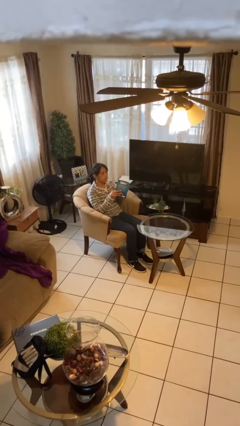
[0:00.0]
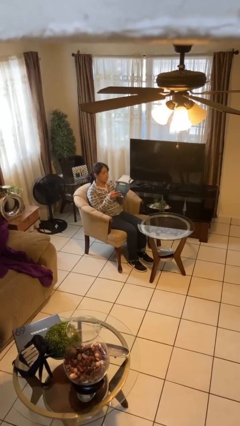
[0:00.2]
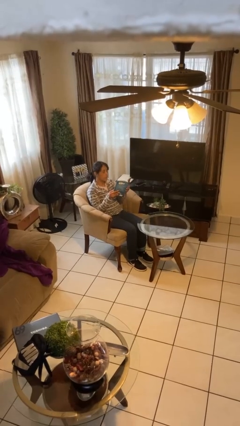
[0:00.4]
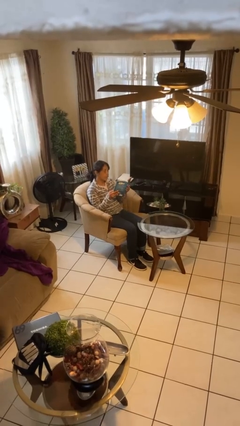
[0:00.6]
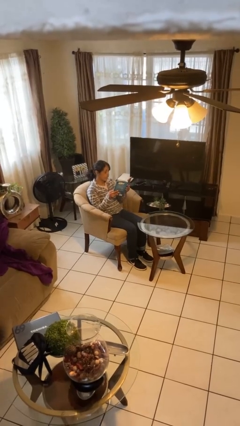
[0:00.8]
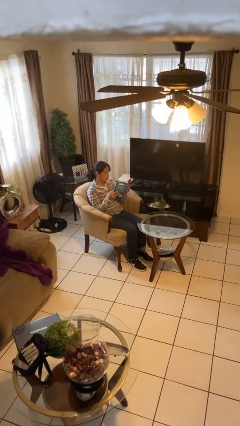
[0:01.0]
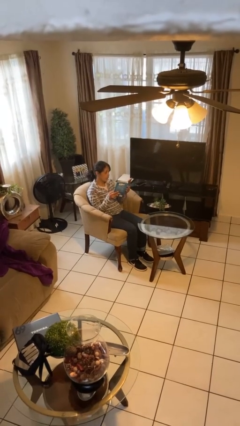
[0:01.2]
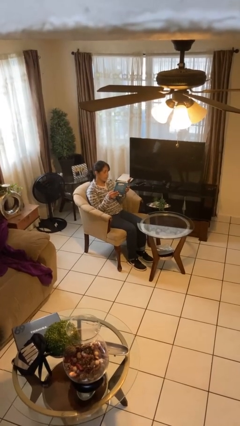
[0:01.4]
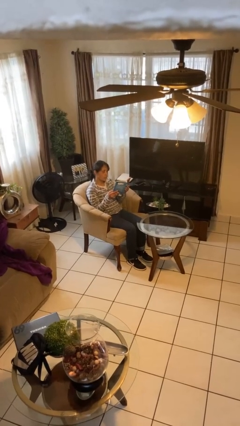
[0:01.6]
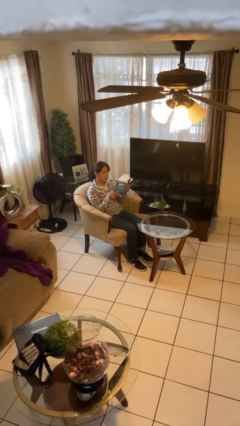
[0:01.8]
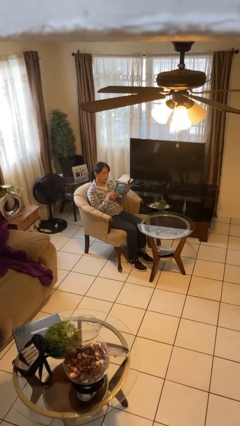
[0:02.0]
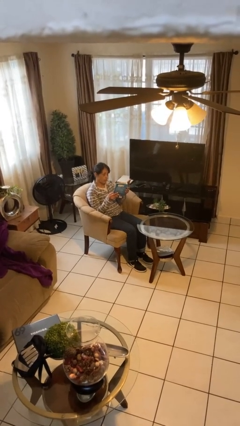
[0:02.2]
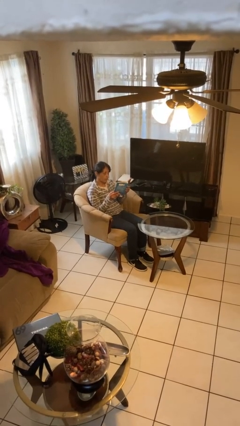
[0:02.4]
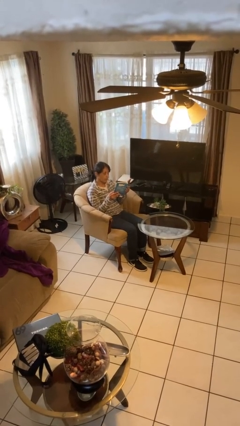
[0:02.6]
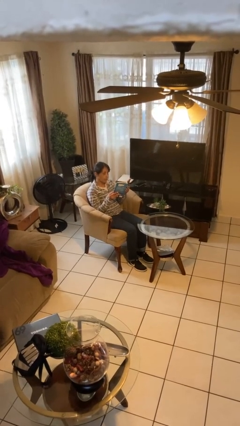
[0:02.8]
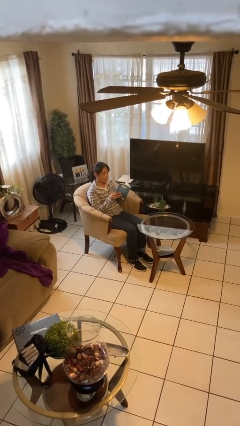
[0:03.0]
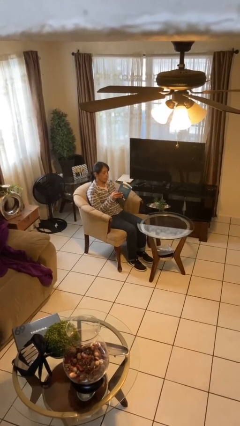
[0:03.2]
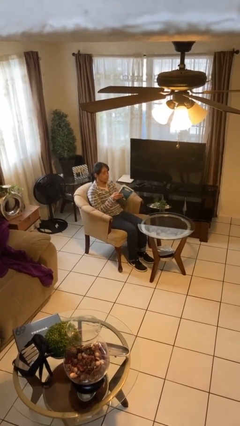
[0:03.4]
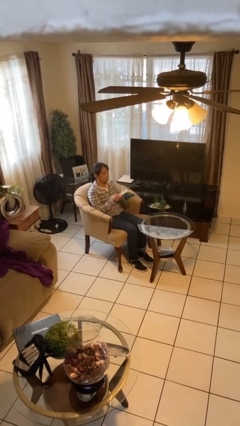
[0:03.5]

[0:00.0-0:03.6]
person reads document

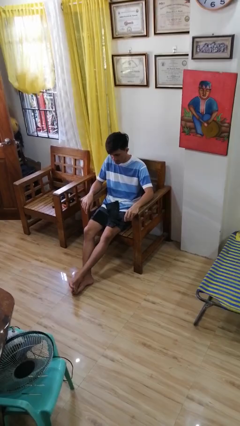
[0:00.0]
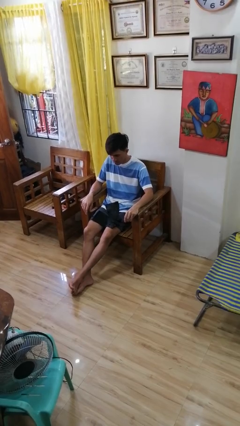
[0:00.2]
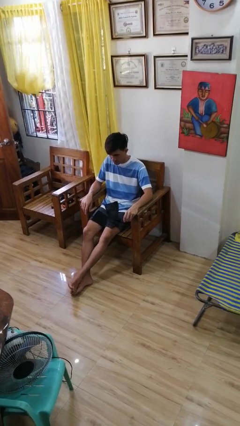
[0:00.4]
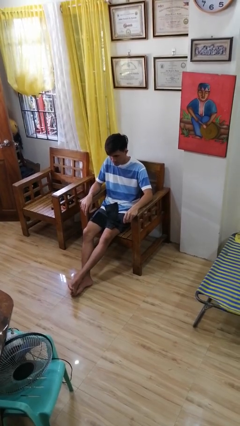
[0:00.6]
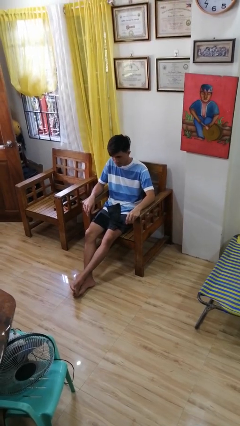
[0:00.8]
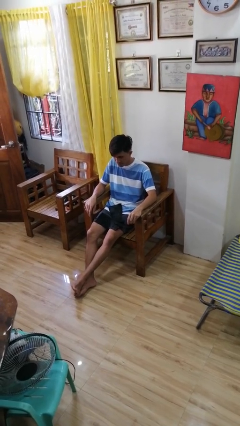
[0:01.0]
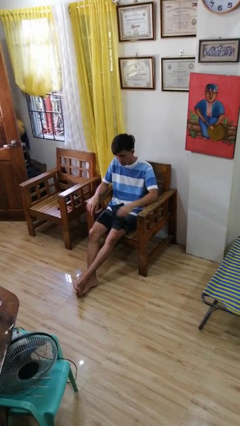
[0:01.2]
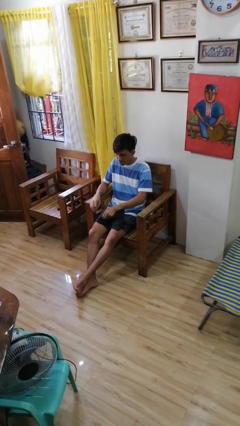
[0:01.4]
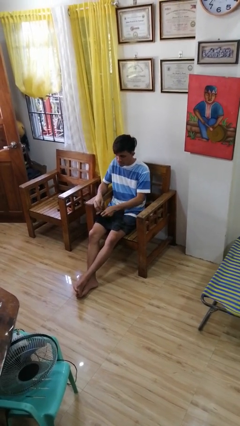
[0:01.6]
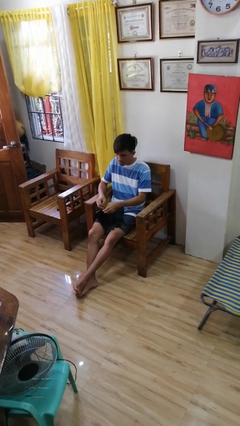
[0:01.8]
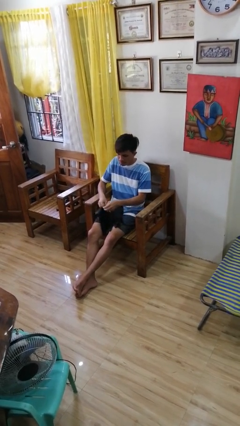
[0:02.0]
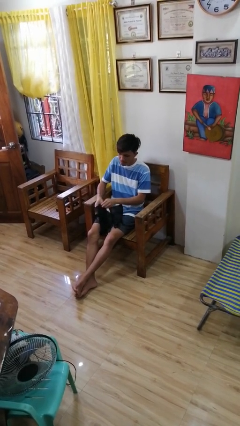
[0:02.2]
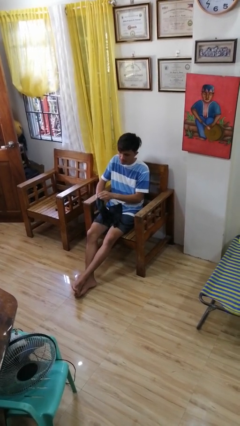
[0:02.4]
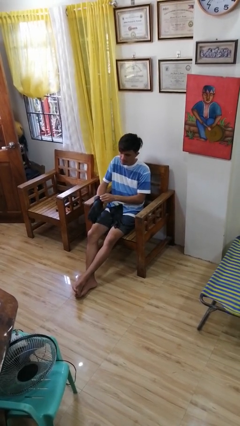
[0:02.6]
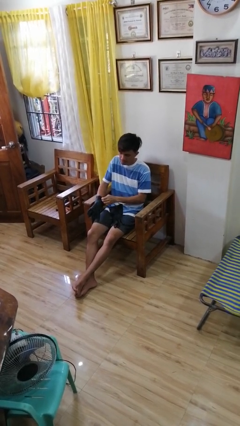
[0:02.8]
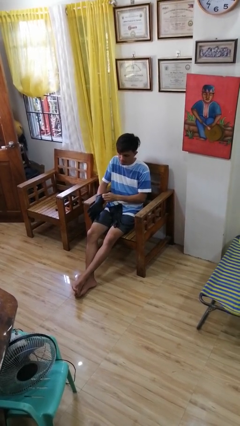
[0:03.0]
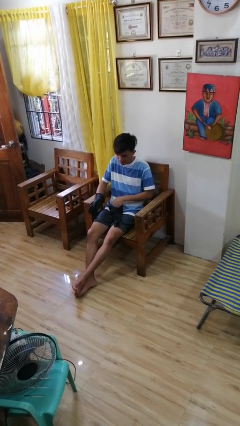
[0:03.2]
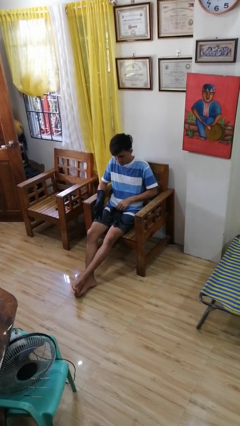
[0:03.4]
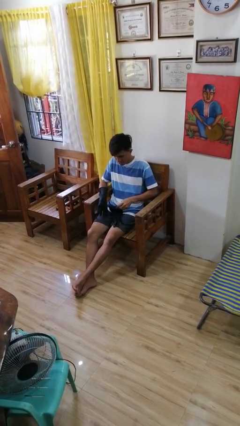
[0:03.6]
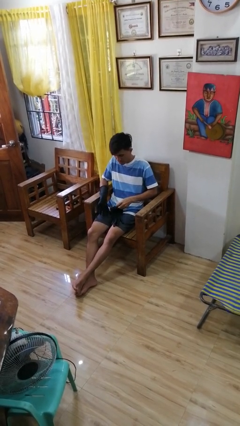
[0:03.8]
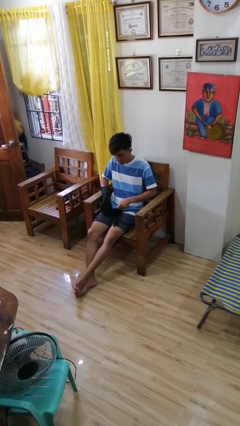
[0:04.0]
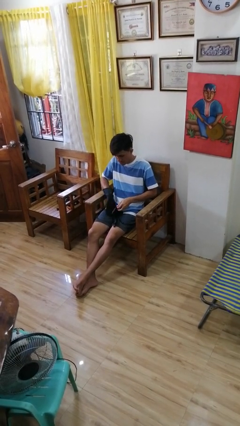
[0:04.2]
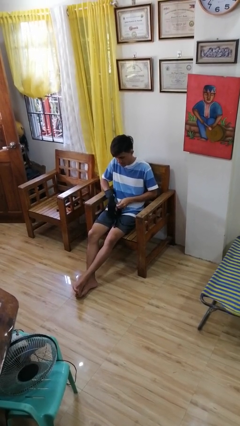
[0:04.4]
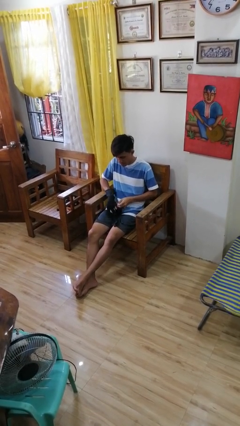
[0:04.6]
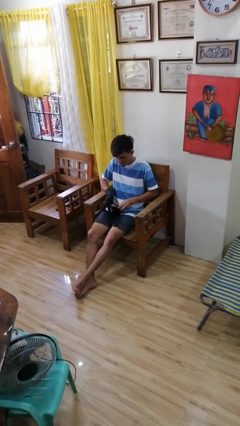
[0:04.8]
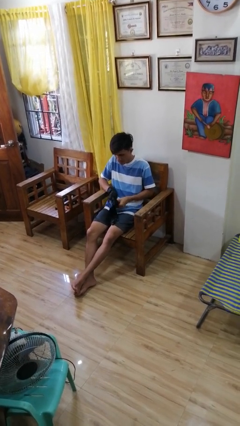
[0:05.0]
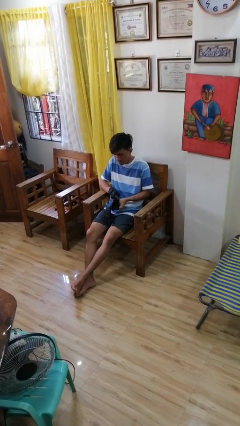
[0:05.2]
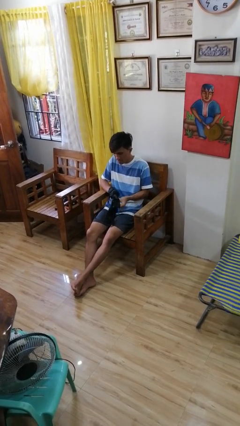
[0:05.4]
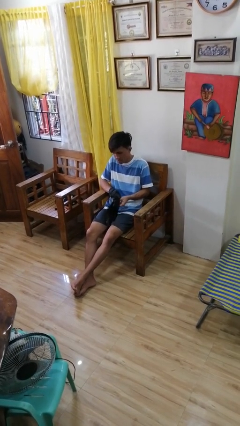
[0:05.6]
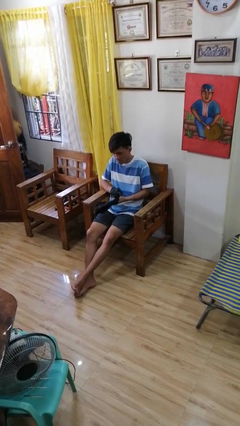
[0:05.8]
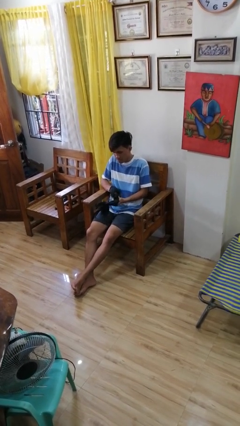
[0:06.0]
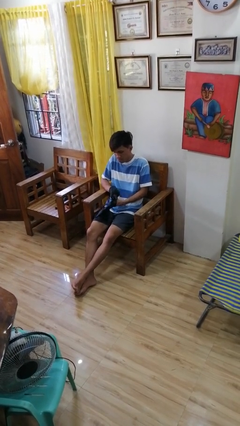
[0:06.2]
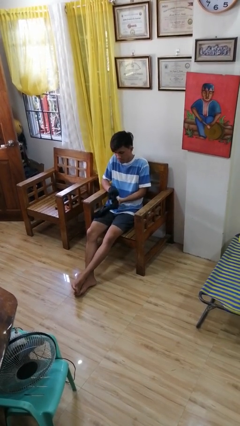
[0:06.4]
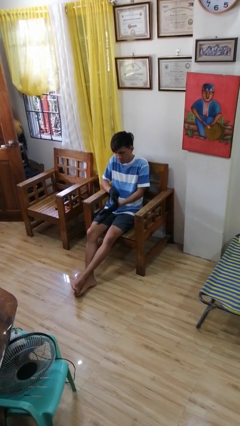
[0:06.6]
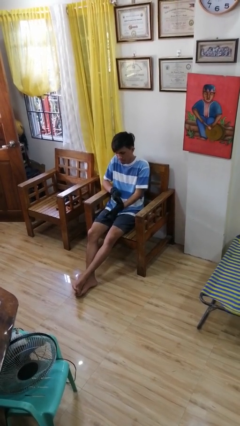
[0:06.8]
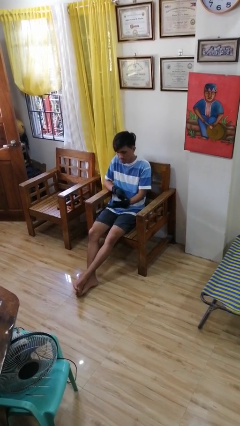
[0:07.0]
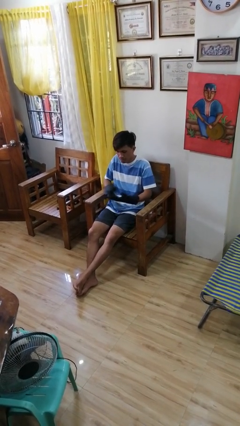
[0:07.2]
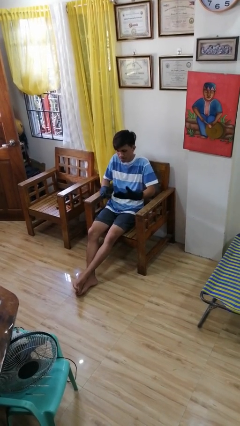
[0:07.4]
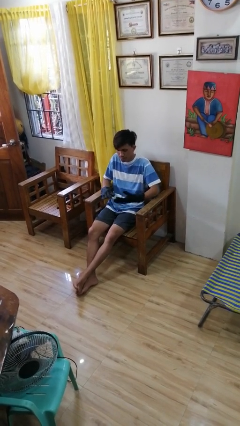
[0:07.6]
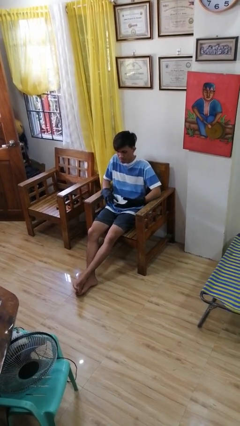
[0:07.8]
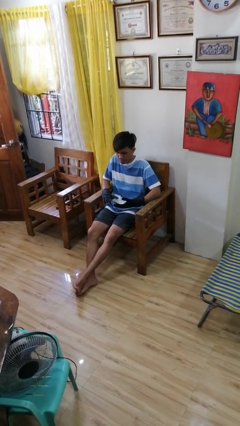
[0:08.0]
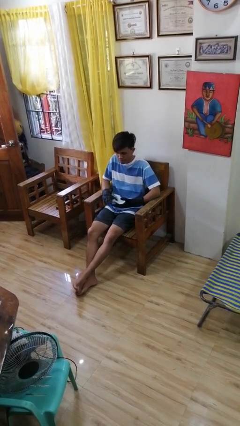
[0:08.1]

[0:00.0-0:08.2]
person puts on gloves

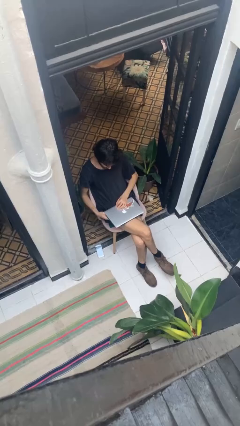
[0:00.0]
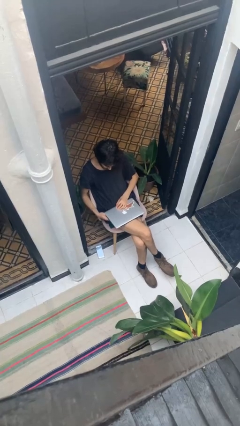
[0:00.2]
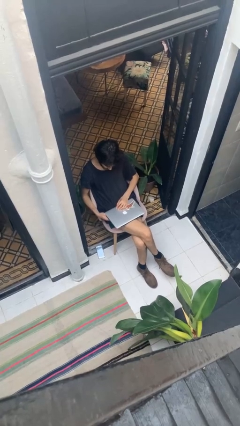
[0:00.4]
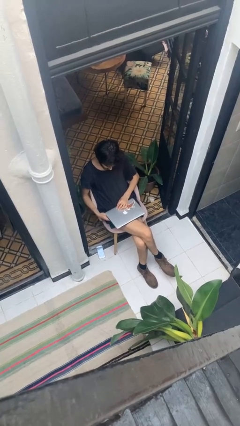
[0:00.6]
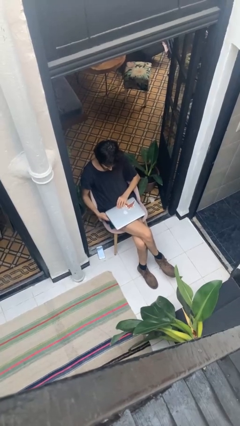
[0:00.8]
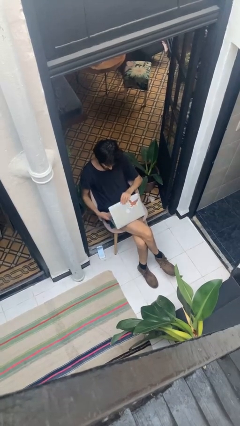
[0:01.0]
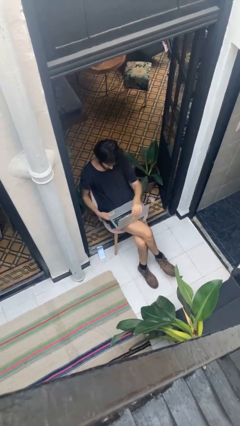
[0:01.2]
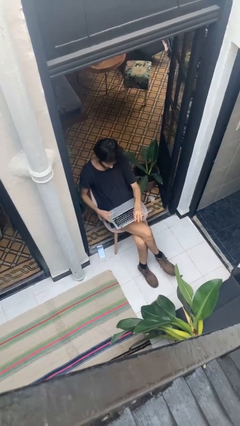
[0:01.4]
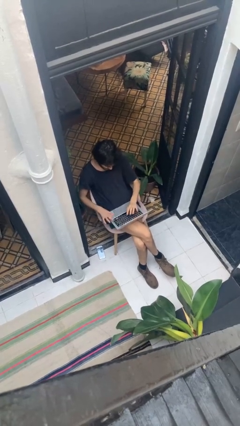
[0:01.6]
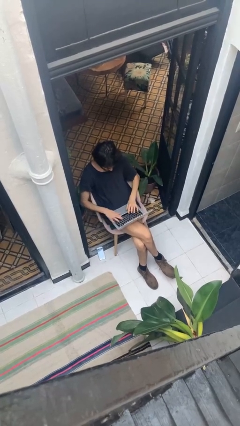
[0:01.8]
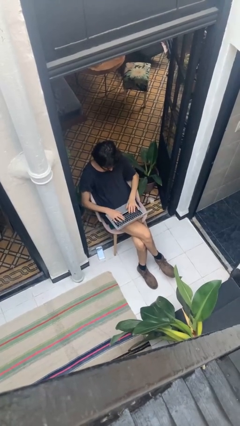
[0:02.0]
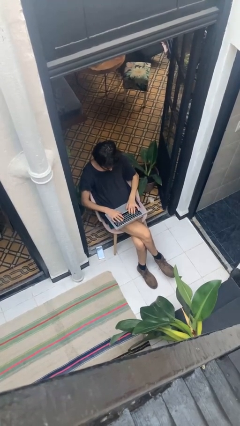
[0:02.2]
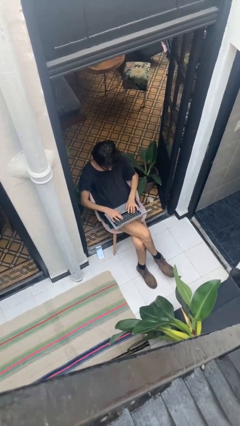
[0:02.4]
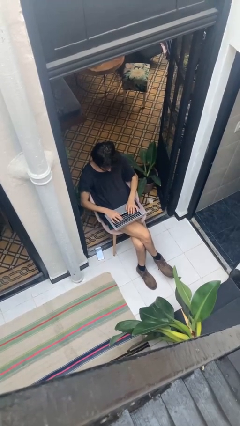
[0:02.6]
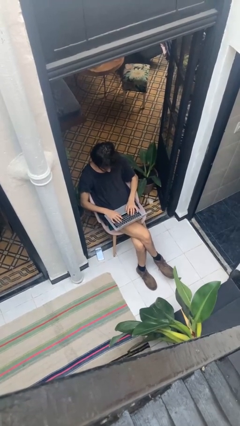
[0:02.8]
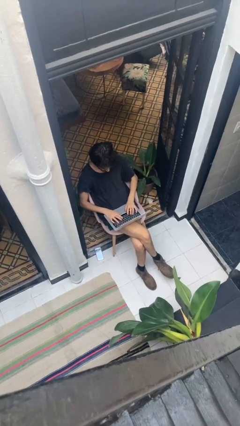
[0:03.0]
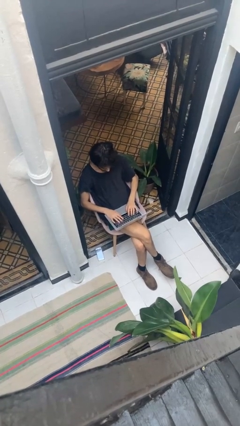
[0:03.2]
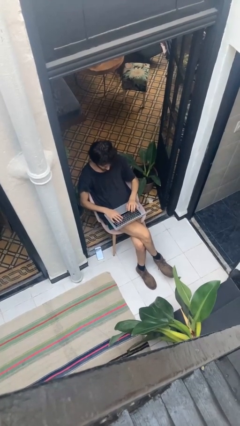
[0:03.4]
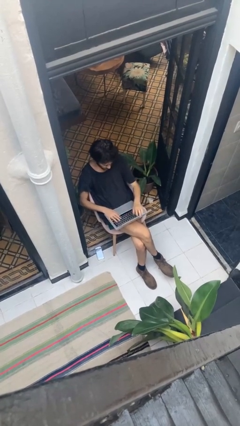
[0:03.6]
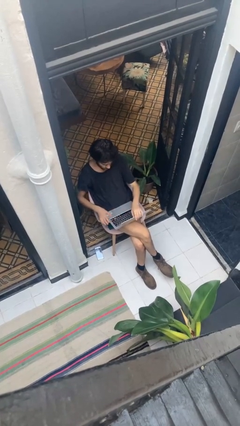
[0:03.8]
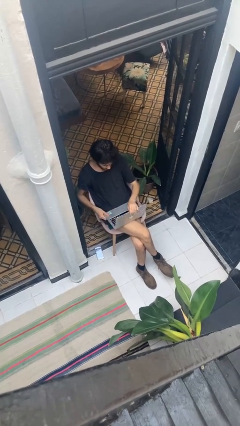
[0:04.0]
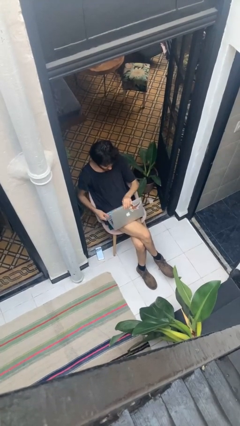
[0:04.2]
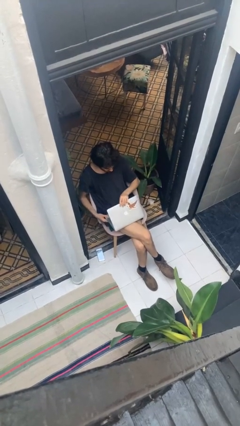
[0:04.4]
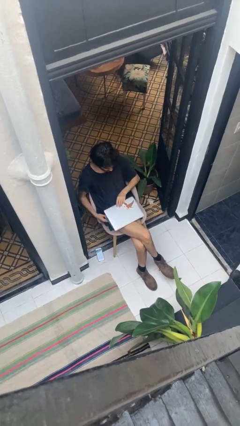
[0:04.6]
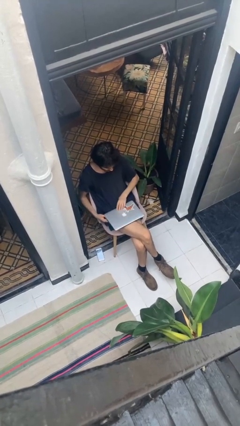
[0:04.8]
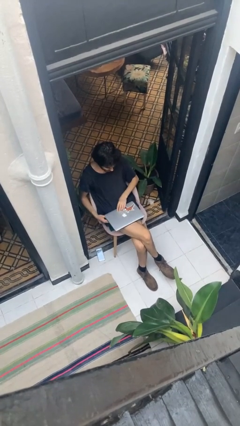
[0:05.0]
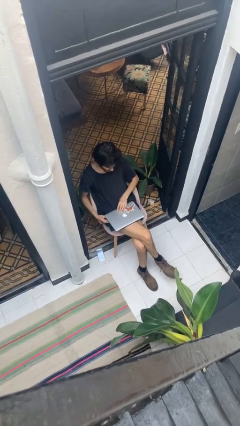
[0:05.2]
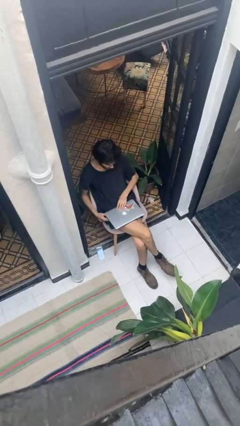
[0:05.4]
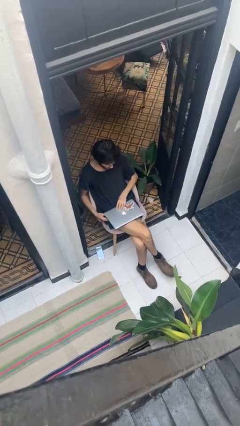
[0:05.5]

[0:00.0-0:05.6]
person interacts with laptop

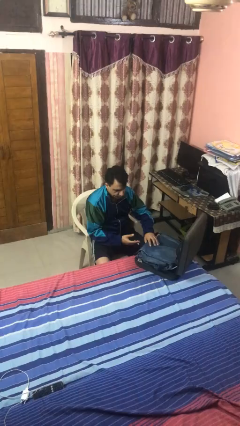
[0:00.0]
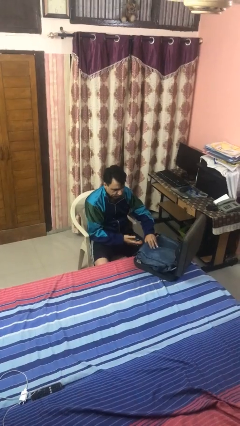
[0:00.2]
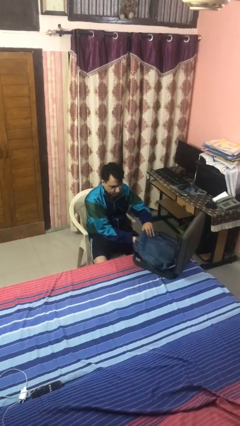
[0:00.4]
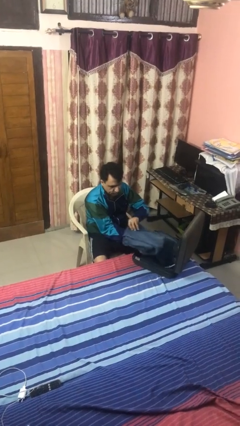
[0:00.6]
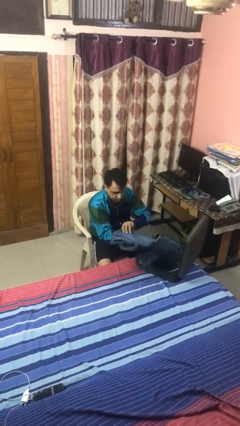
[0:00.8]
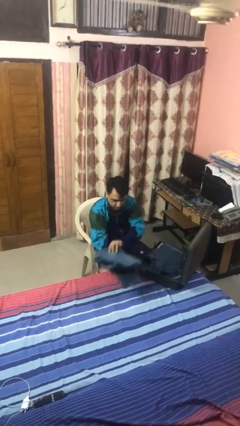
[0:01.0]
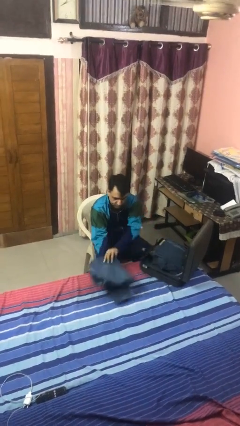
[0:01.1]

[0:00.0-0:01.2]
person unloads clothes from suitcase
